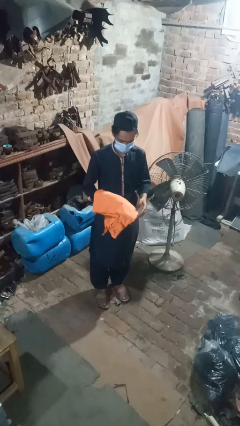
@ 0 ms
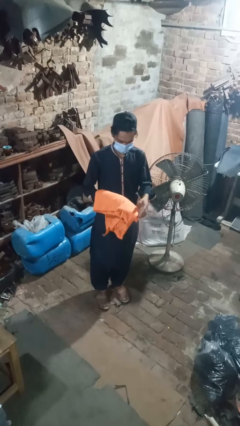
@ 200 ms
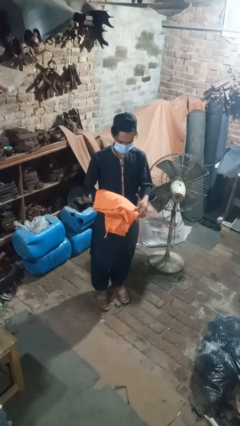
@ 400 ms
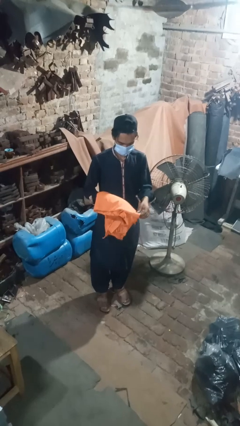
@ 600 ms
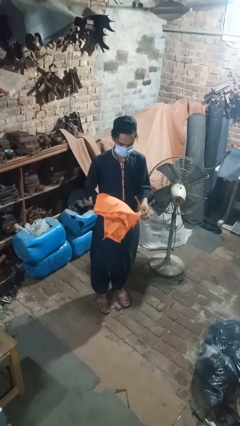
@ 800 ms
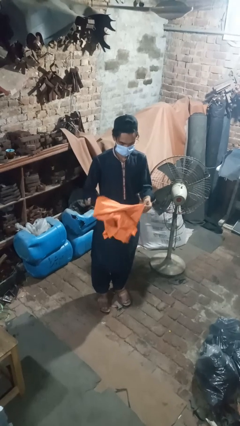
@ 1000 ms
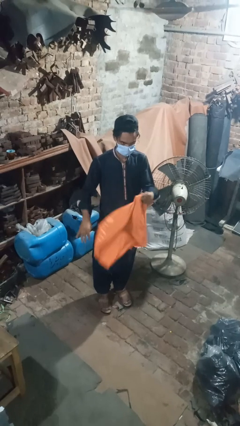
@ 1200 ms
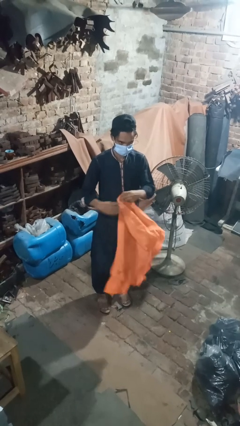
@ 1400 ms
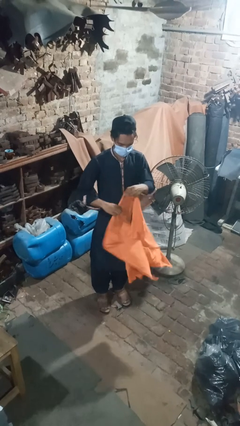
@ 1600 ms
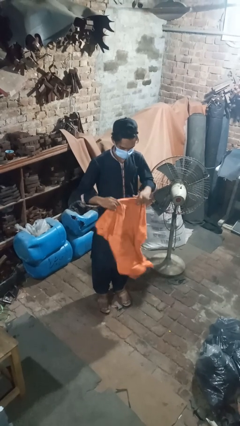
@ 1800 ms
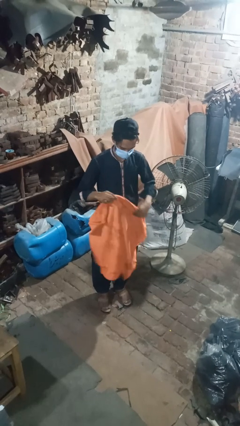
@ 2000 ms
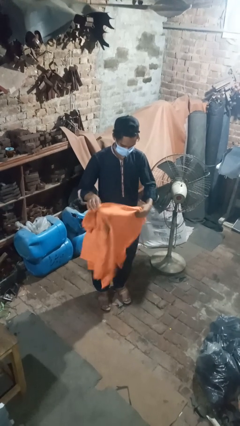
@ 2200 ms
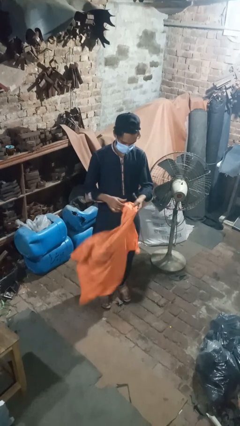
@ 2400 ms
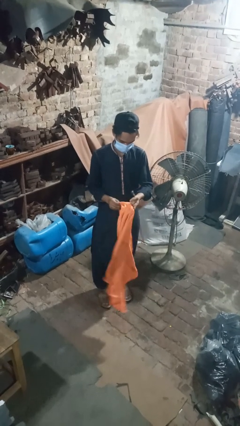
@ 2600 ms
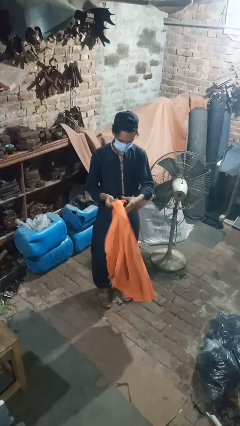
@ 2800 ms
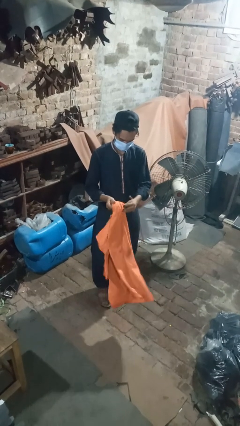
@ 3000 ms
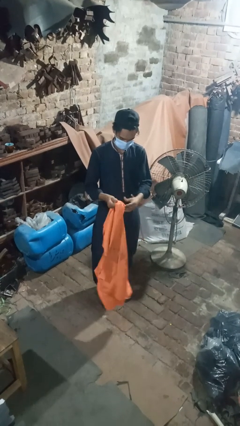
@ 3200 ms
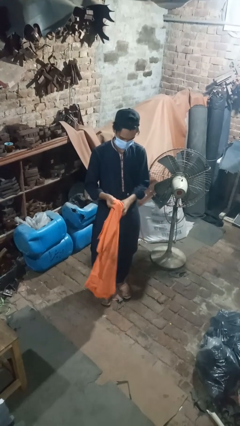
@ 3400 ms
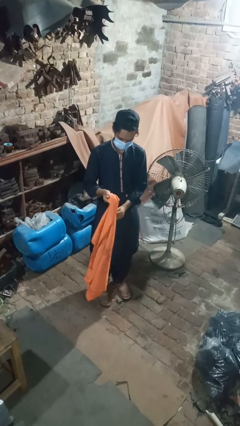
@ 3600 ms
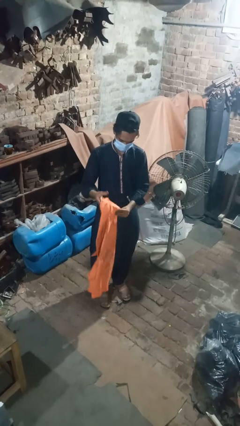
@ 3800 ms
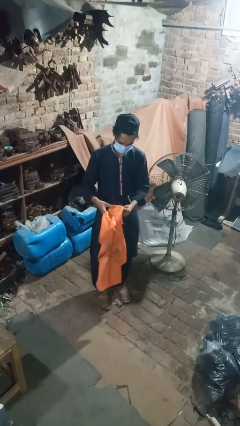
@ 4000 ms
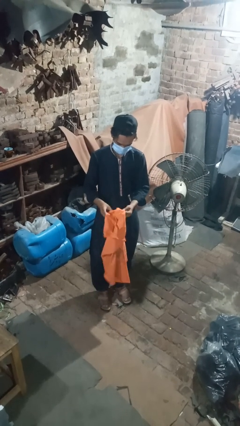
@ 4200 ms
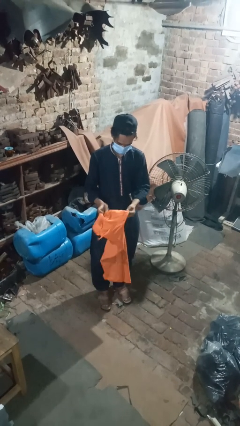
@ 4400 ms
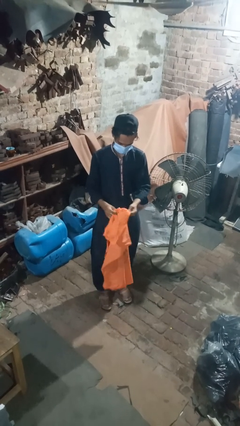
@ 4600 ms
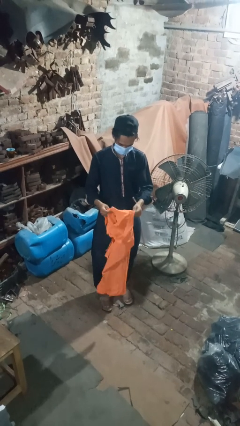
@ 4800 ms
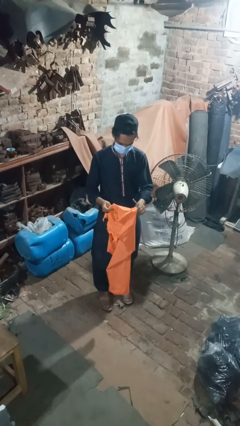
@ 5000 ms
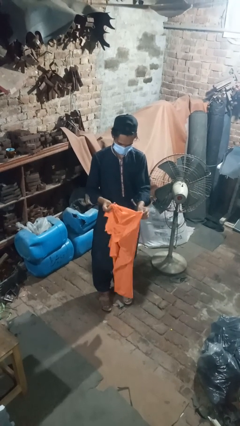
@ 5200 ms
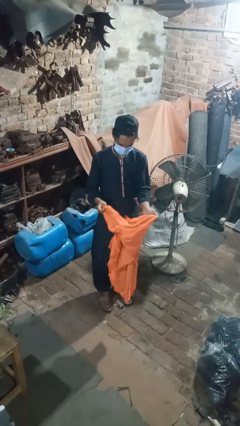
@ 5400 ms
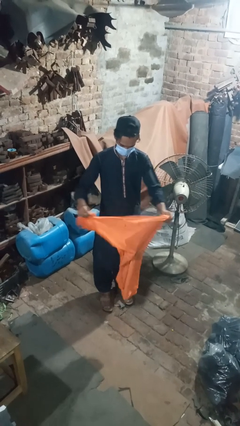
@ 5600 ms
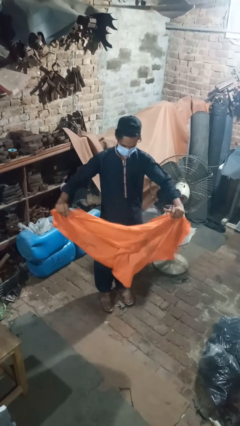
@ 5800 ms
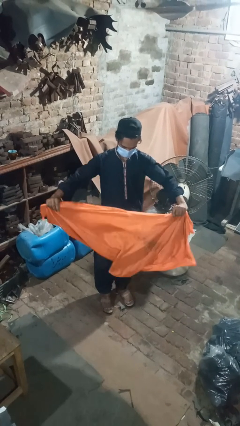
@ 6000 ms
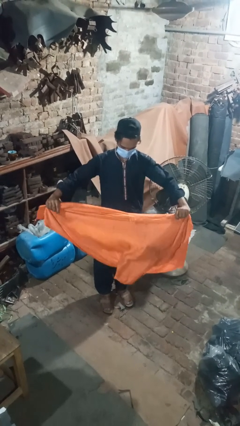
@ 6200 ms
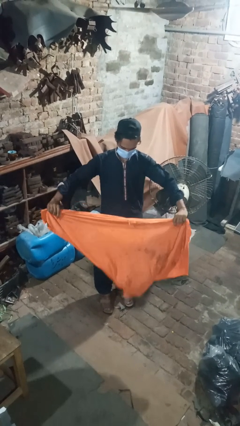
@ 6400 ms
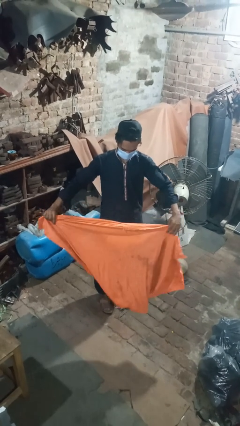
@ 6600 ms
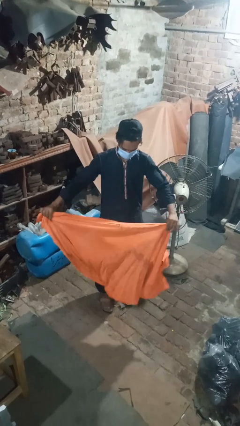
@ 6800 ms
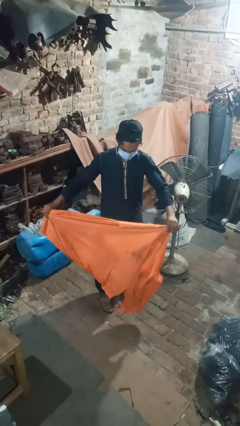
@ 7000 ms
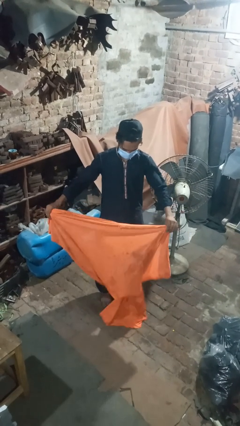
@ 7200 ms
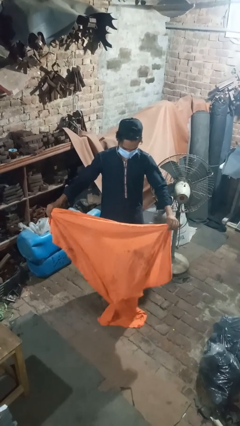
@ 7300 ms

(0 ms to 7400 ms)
person unfolds blanket

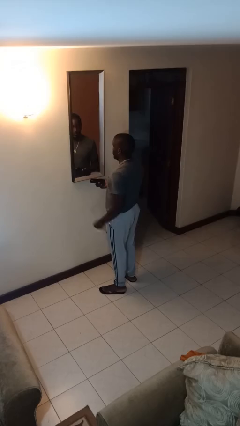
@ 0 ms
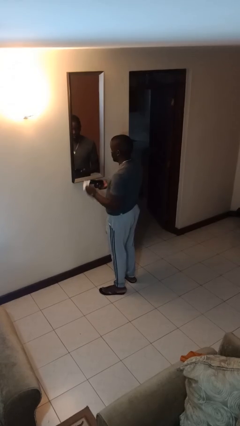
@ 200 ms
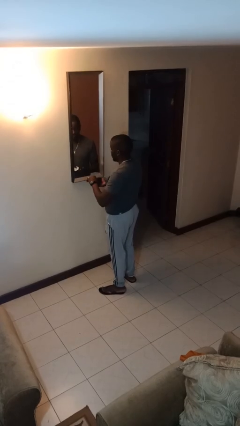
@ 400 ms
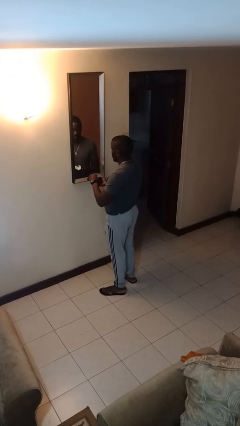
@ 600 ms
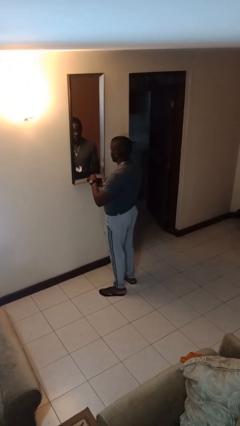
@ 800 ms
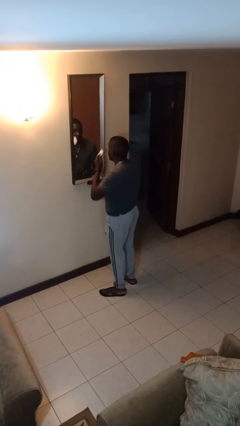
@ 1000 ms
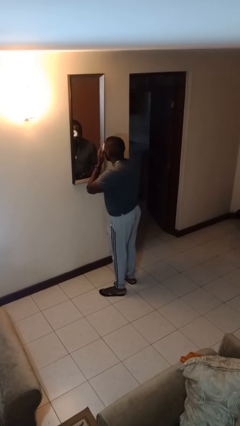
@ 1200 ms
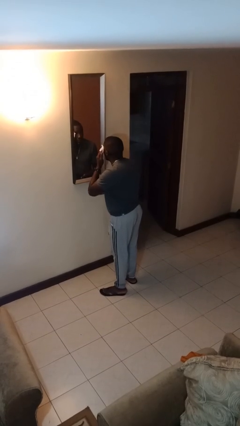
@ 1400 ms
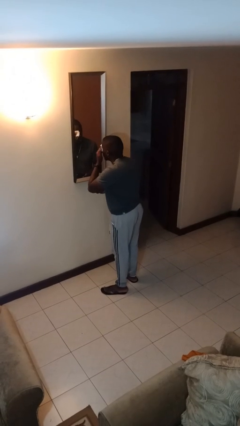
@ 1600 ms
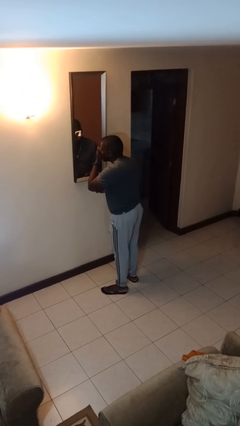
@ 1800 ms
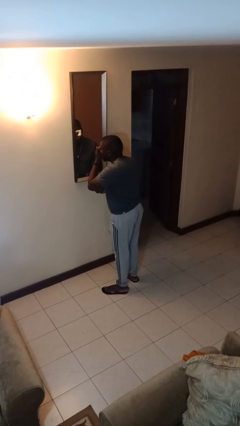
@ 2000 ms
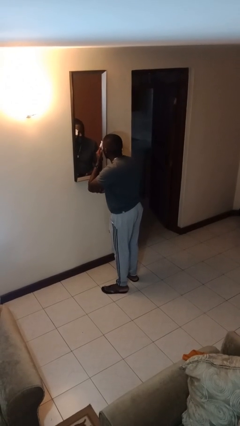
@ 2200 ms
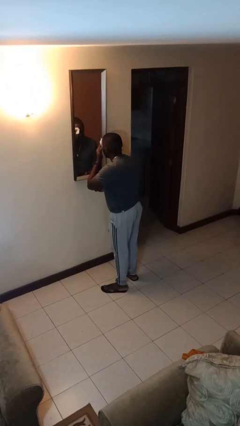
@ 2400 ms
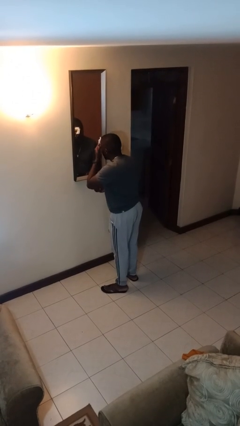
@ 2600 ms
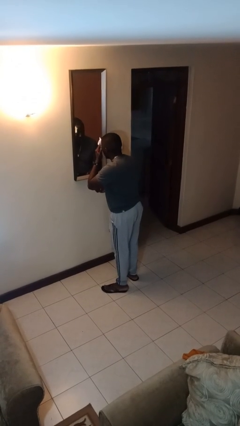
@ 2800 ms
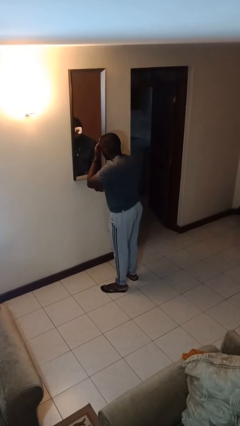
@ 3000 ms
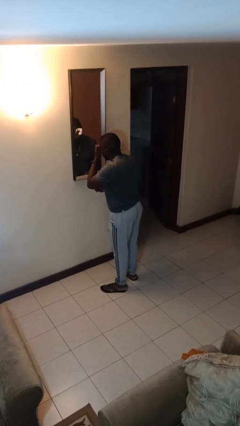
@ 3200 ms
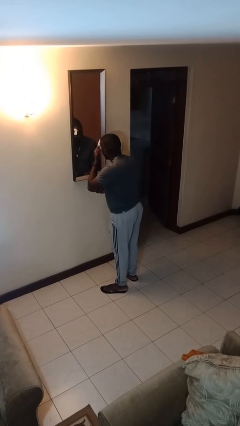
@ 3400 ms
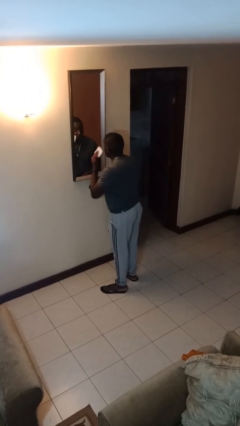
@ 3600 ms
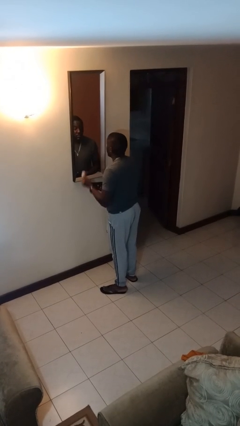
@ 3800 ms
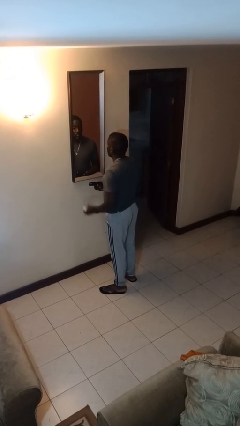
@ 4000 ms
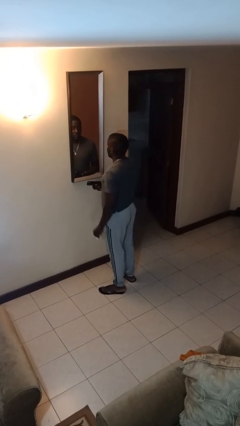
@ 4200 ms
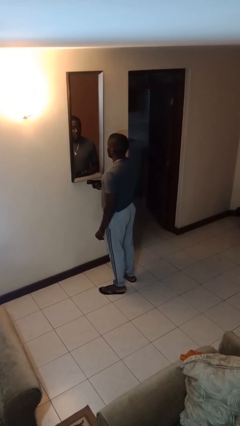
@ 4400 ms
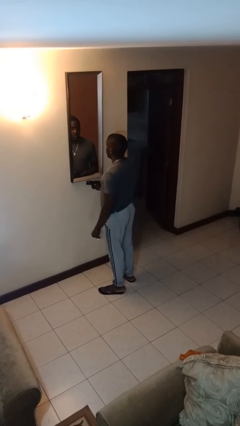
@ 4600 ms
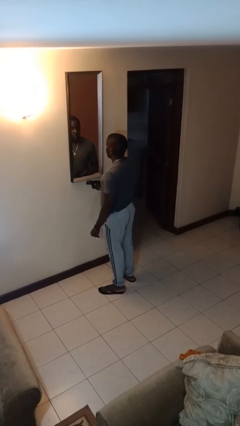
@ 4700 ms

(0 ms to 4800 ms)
person applies foundation makeup

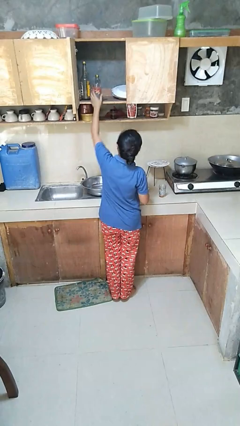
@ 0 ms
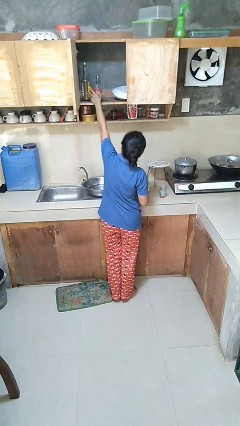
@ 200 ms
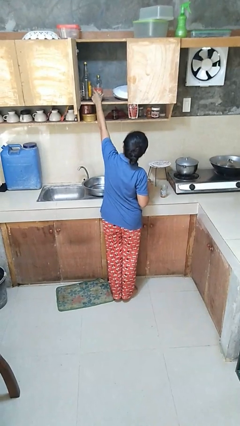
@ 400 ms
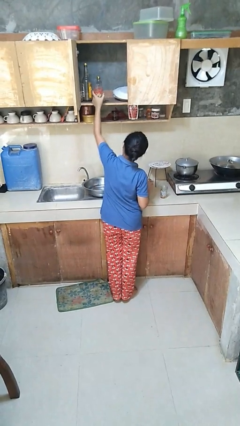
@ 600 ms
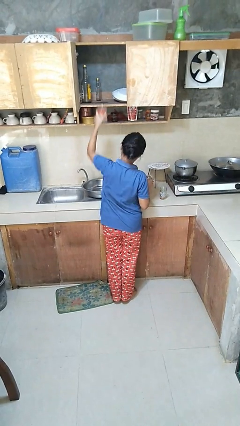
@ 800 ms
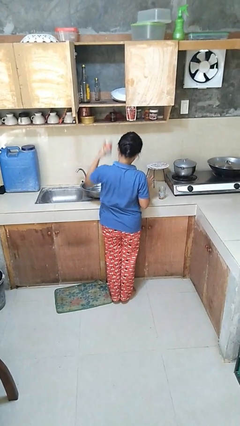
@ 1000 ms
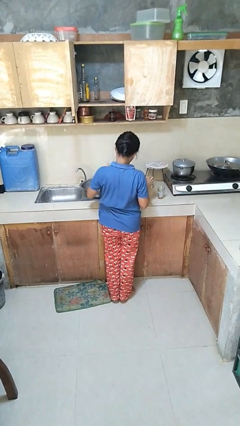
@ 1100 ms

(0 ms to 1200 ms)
person takes object from cabinet

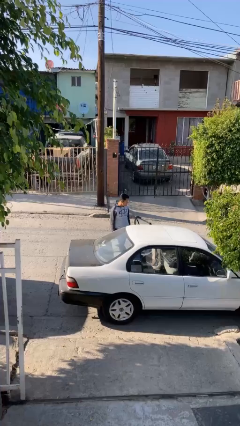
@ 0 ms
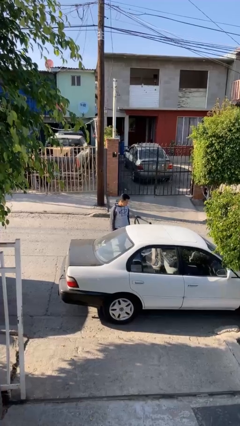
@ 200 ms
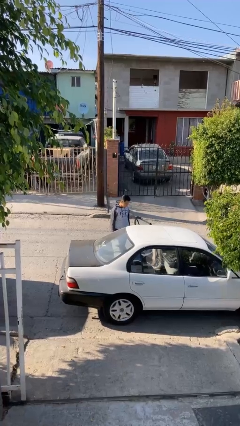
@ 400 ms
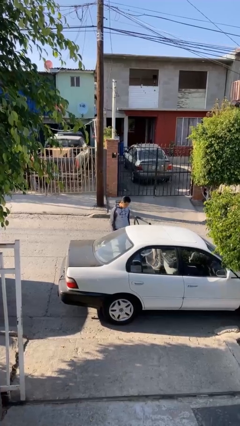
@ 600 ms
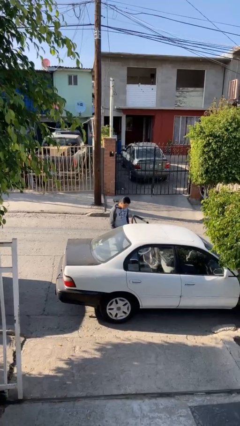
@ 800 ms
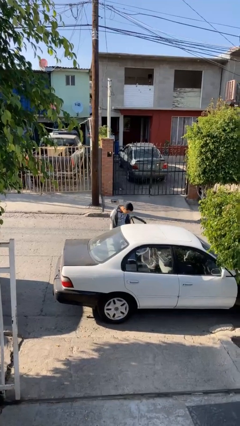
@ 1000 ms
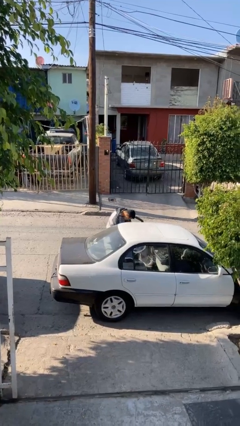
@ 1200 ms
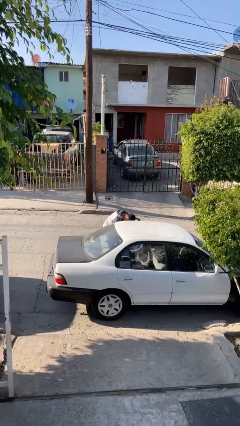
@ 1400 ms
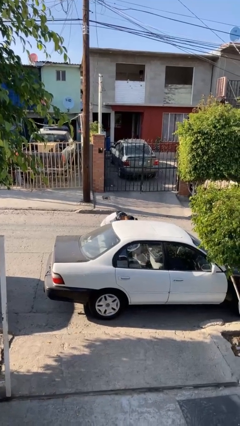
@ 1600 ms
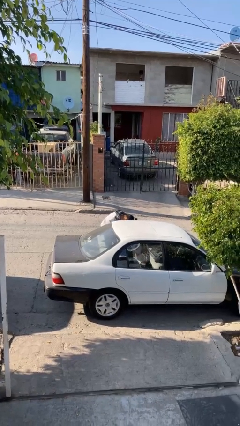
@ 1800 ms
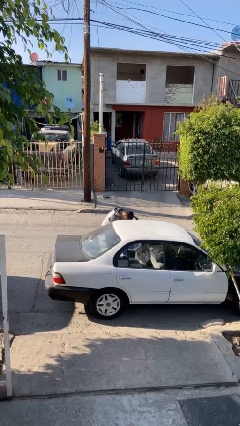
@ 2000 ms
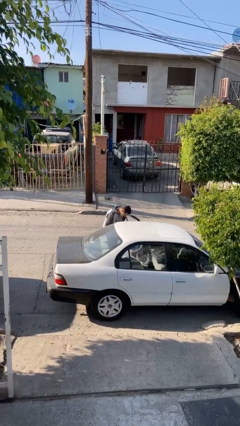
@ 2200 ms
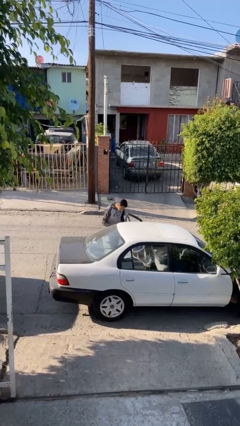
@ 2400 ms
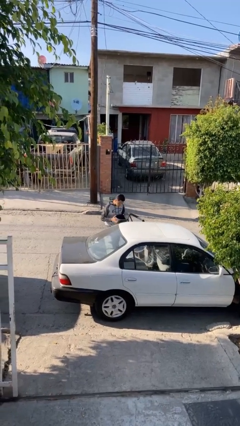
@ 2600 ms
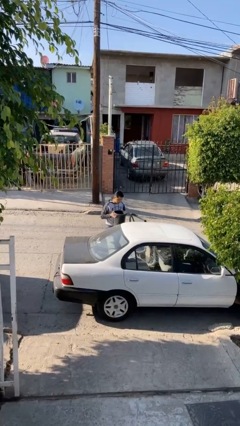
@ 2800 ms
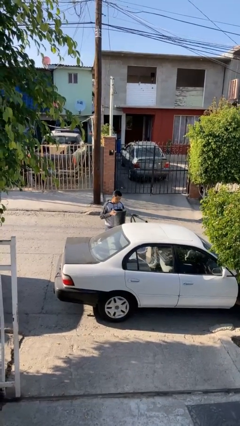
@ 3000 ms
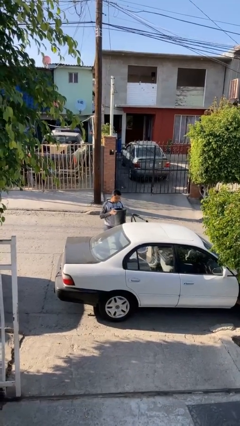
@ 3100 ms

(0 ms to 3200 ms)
person unloads car

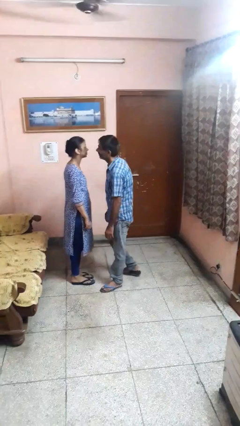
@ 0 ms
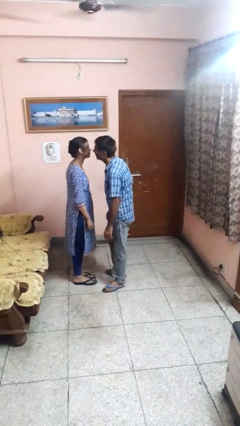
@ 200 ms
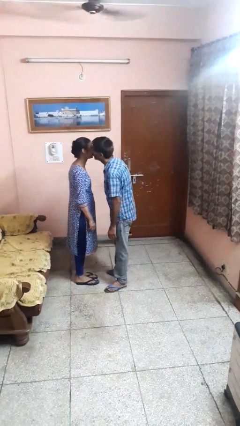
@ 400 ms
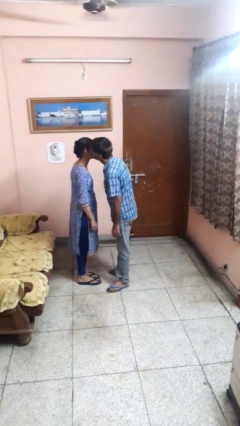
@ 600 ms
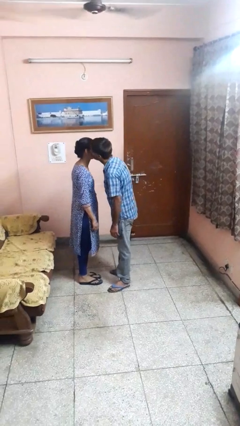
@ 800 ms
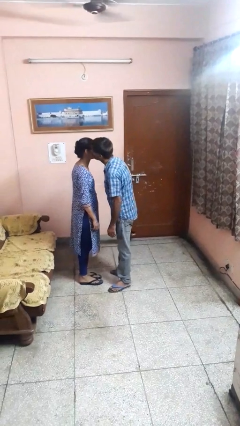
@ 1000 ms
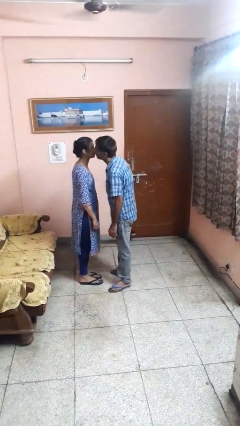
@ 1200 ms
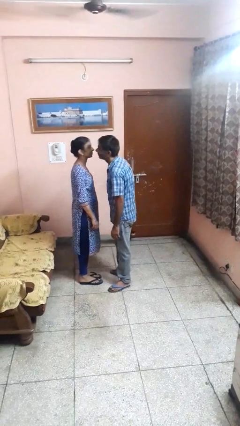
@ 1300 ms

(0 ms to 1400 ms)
person kisses cheek of person
